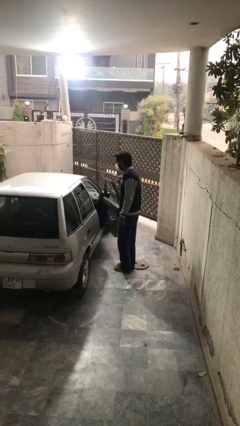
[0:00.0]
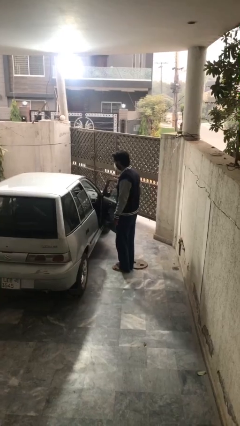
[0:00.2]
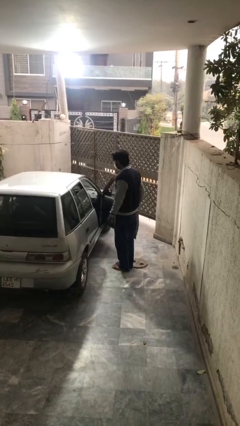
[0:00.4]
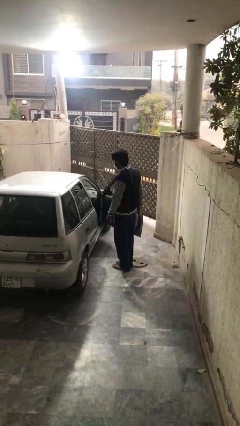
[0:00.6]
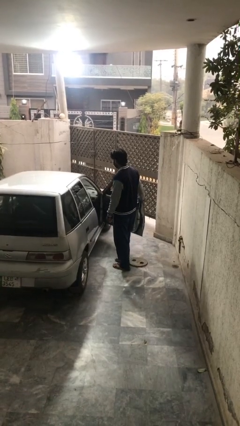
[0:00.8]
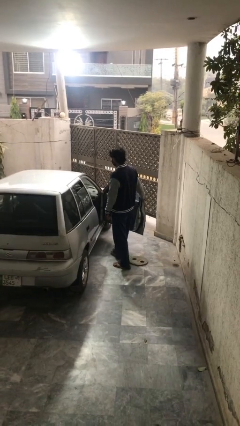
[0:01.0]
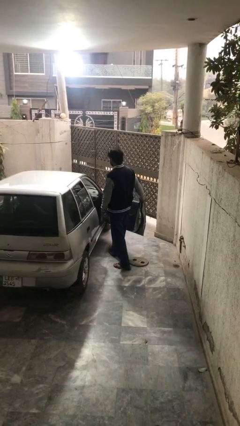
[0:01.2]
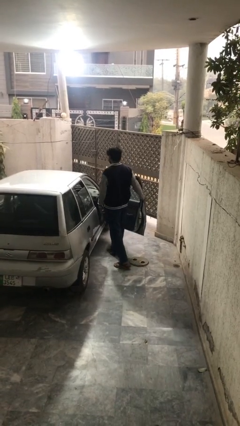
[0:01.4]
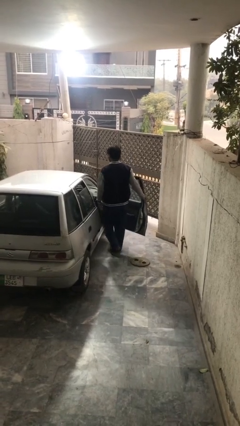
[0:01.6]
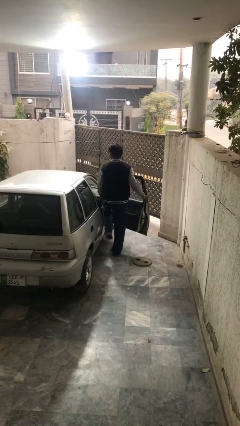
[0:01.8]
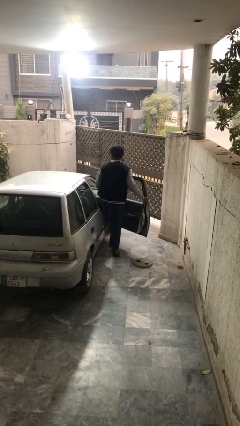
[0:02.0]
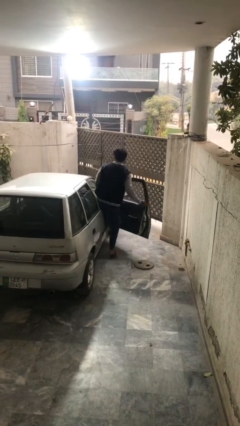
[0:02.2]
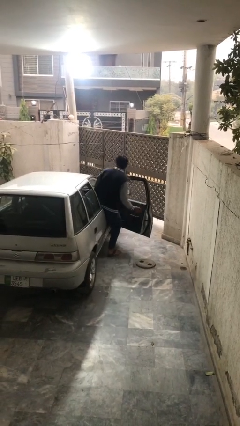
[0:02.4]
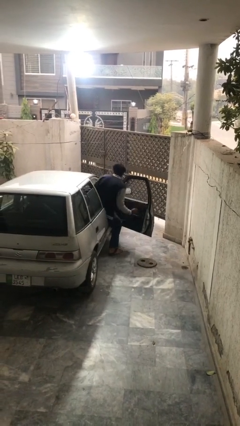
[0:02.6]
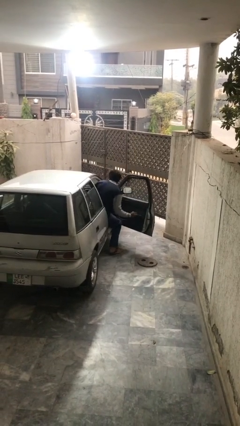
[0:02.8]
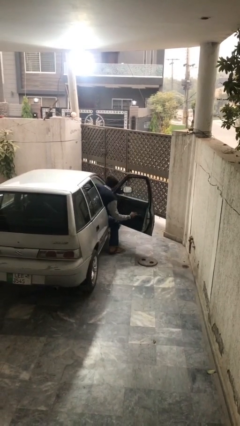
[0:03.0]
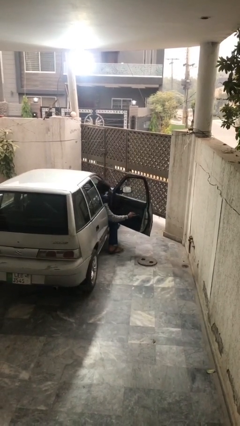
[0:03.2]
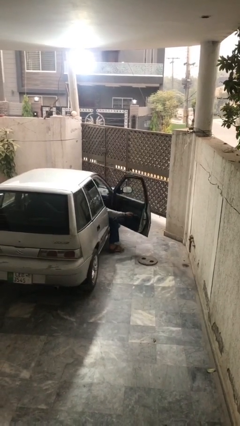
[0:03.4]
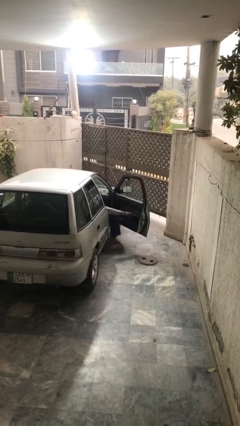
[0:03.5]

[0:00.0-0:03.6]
person enters car

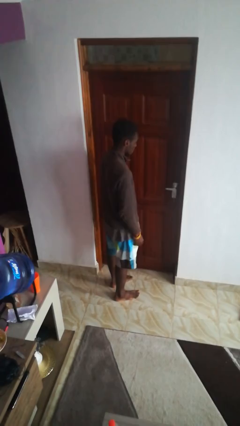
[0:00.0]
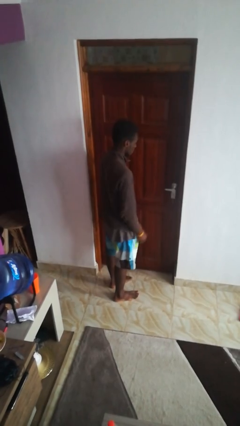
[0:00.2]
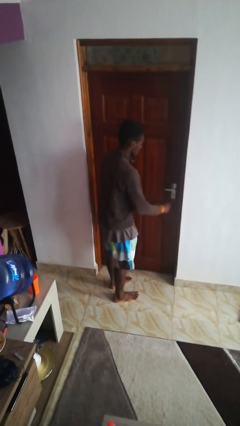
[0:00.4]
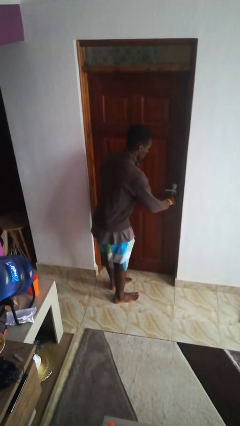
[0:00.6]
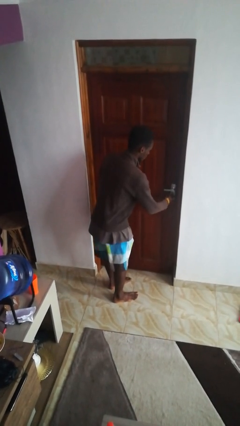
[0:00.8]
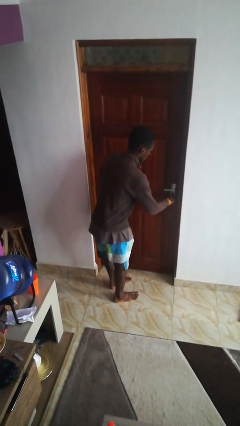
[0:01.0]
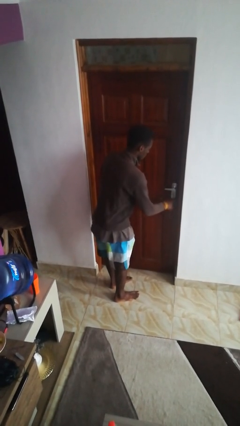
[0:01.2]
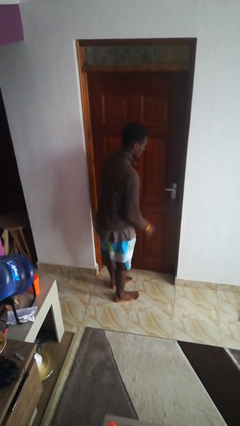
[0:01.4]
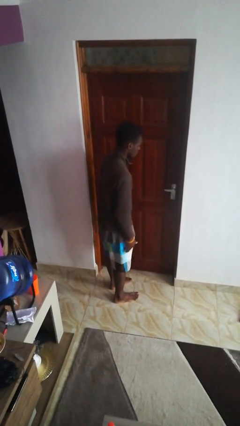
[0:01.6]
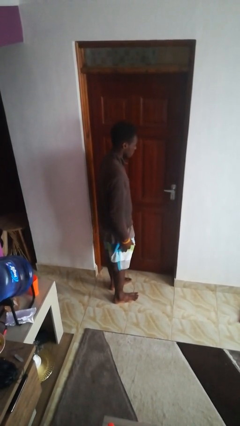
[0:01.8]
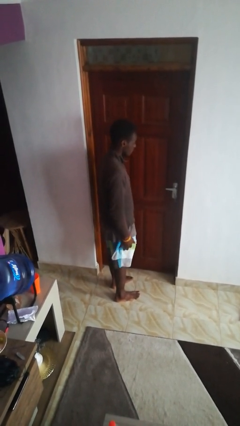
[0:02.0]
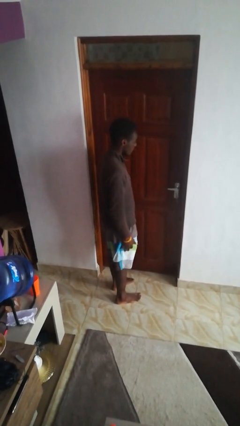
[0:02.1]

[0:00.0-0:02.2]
person locks door with keys

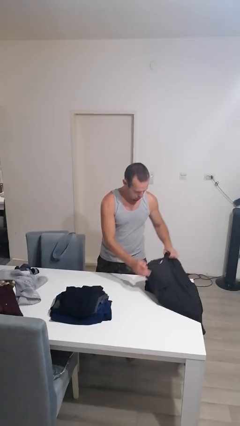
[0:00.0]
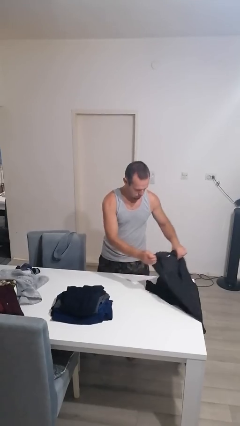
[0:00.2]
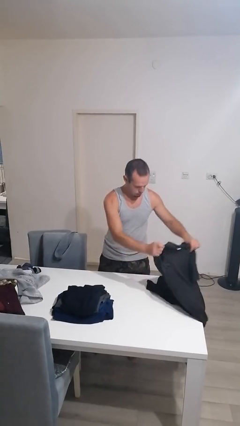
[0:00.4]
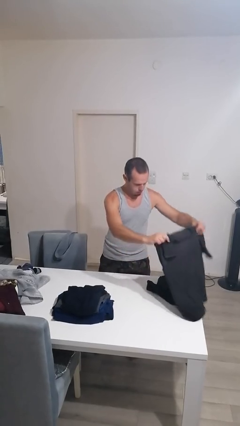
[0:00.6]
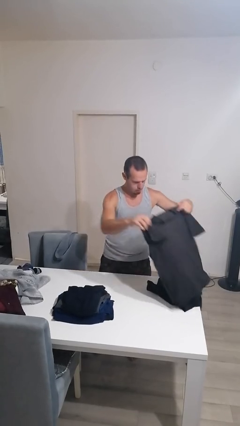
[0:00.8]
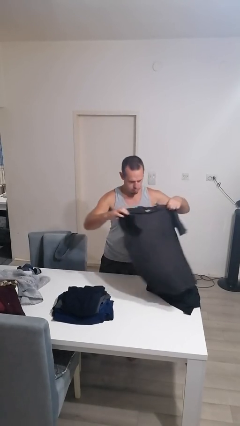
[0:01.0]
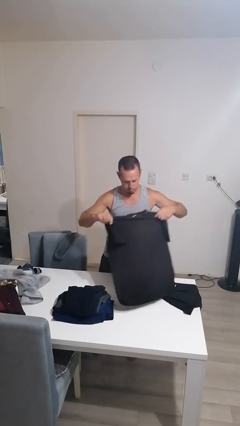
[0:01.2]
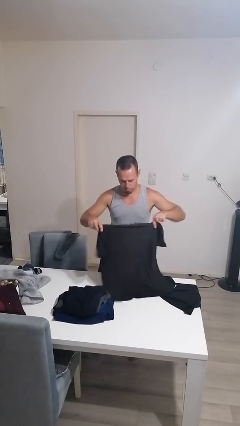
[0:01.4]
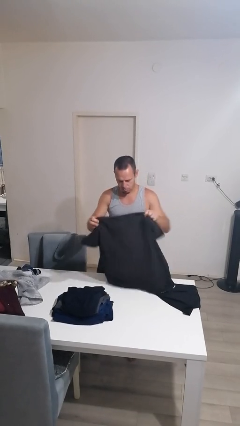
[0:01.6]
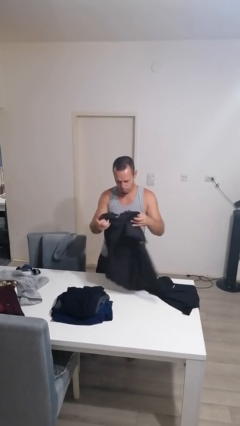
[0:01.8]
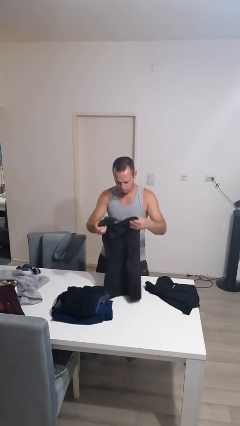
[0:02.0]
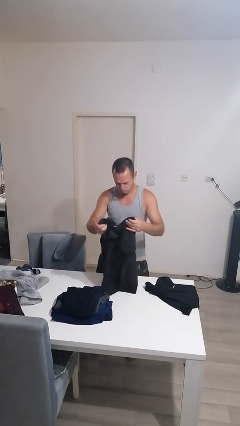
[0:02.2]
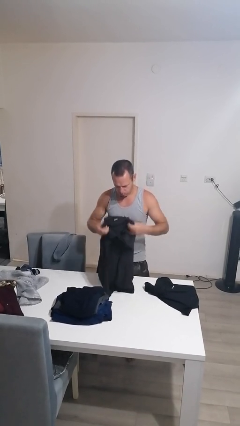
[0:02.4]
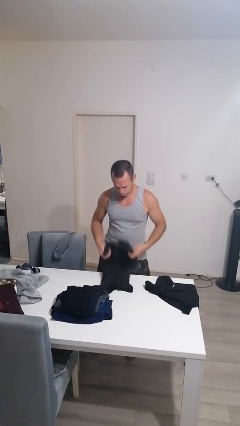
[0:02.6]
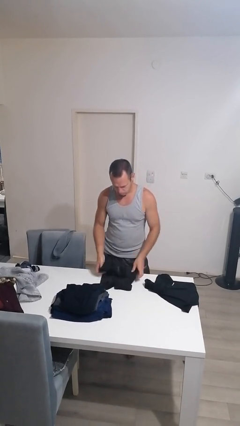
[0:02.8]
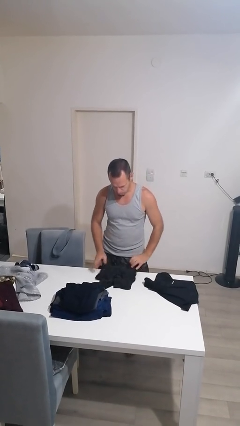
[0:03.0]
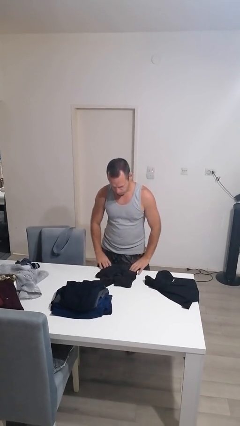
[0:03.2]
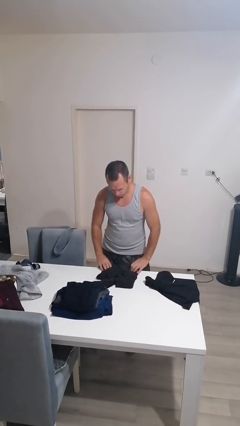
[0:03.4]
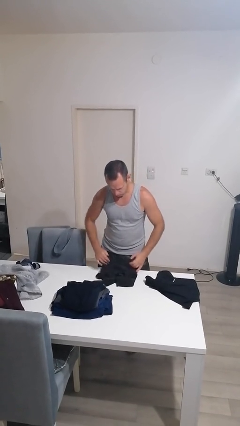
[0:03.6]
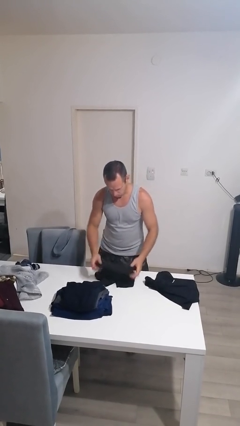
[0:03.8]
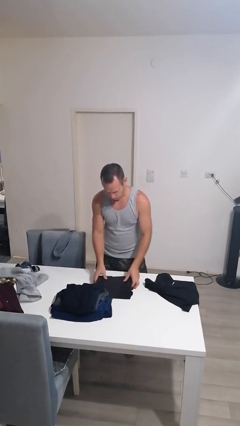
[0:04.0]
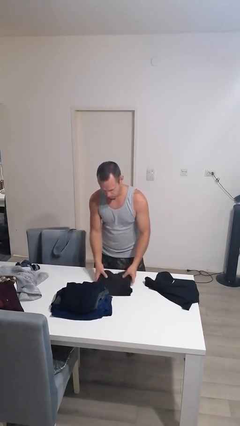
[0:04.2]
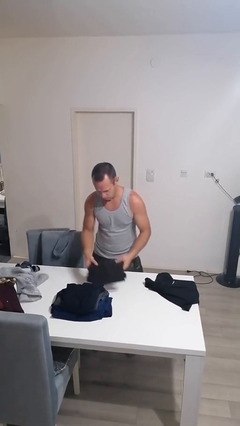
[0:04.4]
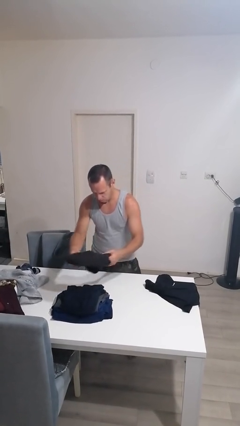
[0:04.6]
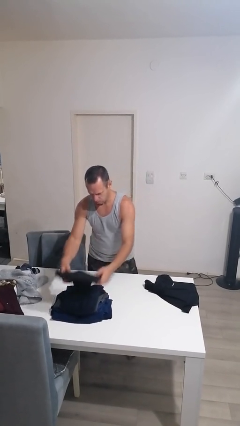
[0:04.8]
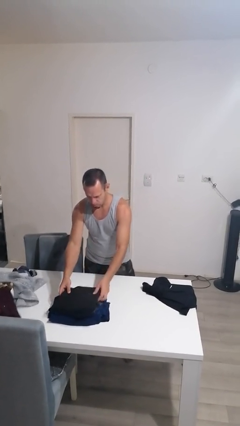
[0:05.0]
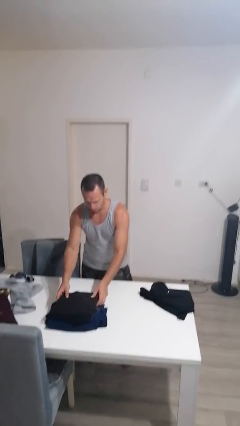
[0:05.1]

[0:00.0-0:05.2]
person folds shirt

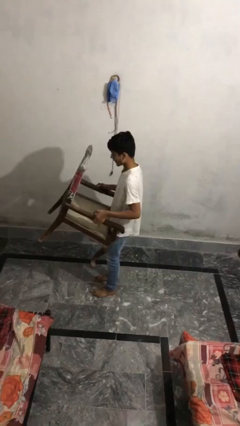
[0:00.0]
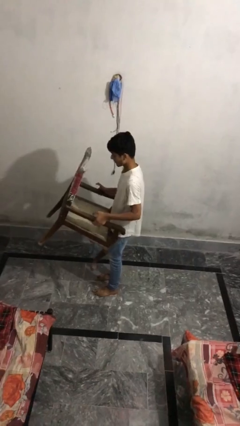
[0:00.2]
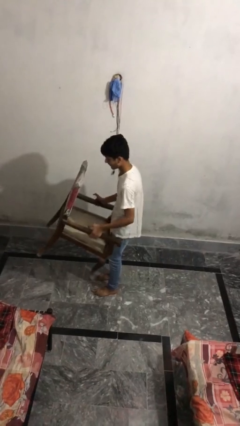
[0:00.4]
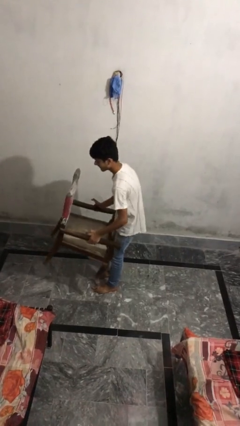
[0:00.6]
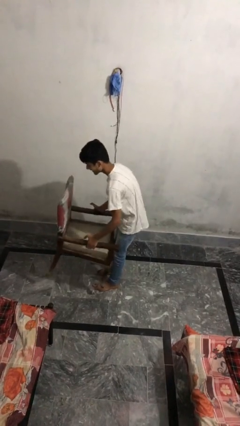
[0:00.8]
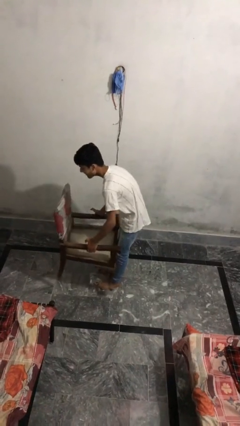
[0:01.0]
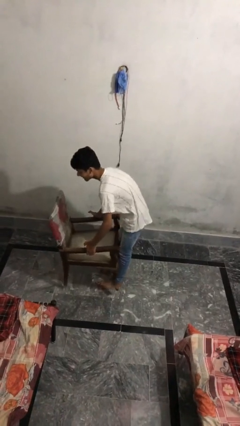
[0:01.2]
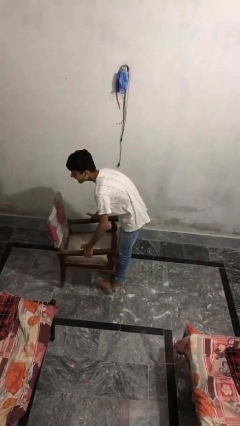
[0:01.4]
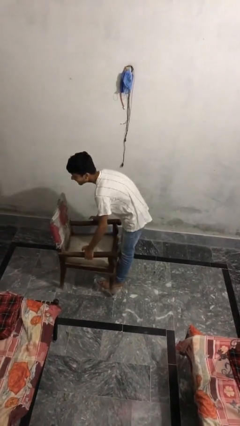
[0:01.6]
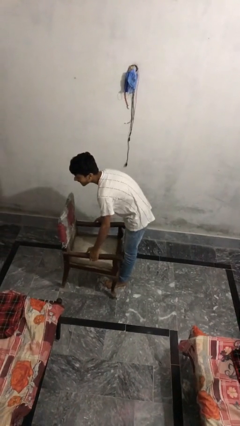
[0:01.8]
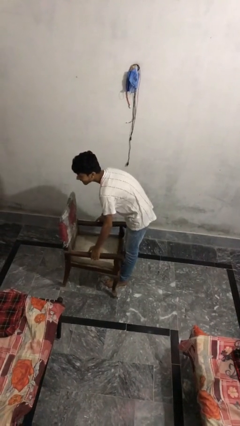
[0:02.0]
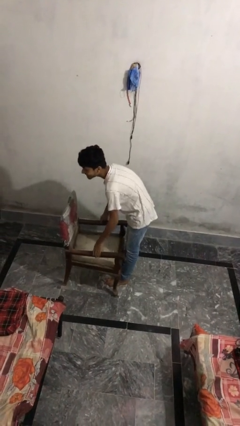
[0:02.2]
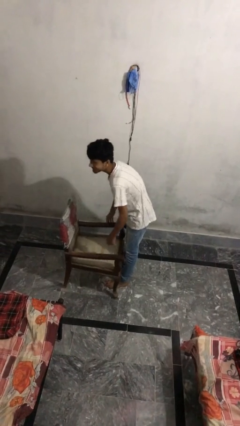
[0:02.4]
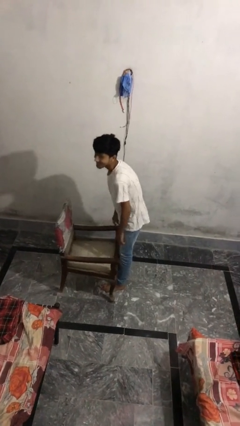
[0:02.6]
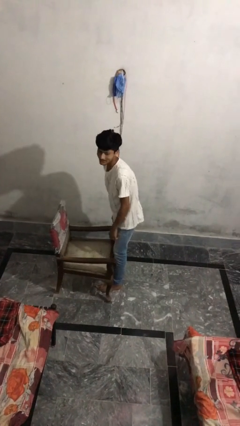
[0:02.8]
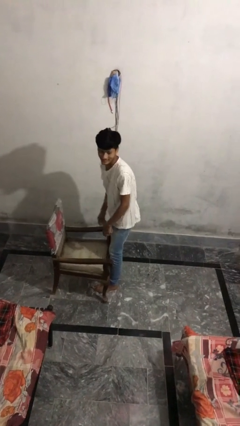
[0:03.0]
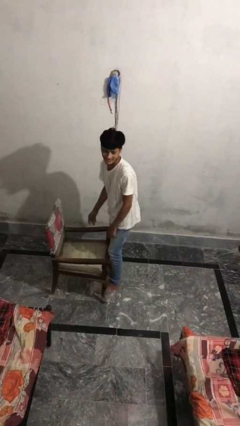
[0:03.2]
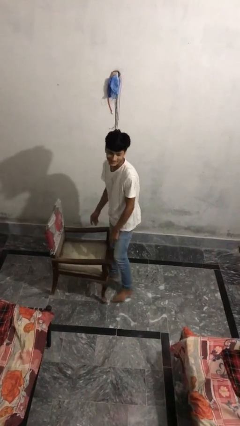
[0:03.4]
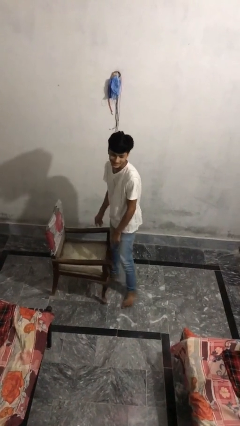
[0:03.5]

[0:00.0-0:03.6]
person puts down object on floor

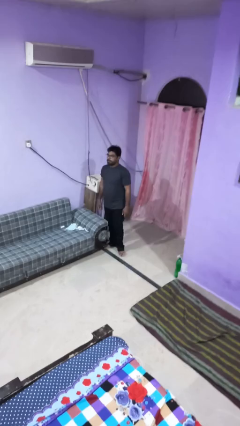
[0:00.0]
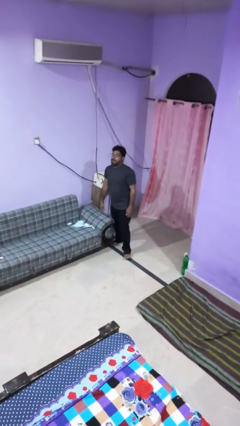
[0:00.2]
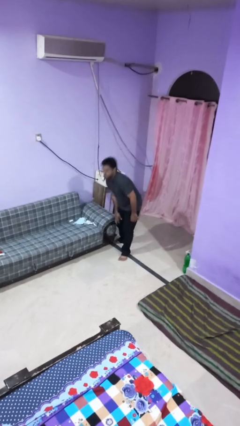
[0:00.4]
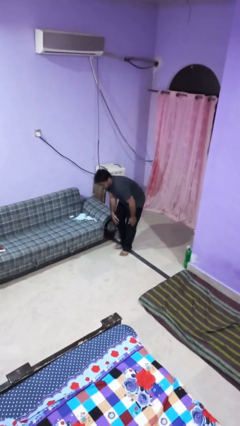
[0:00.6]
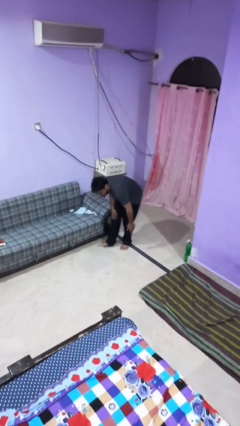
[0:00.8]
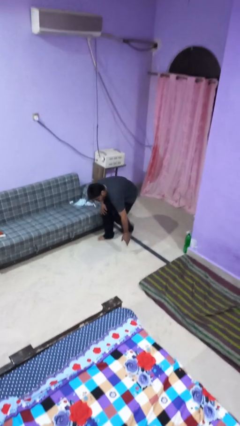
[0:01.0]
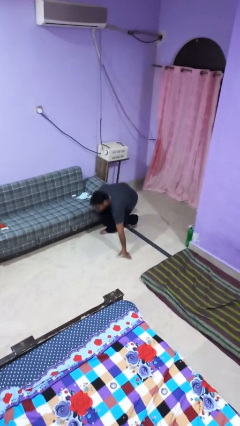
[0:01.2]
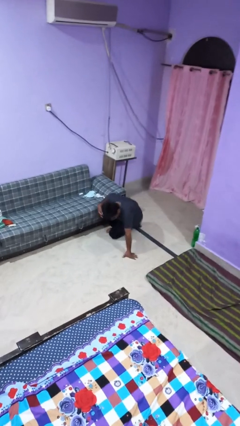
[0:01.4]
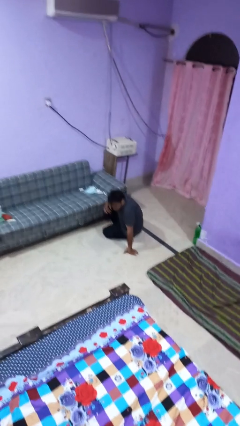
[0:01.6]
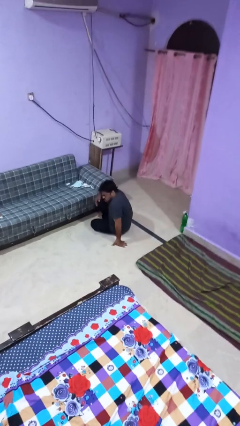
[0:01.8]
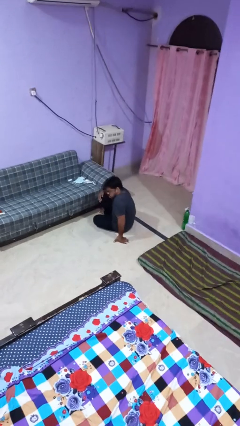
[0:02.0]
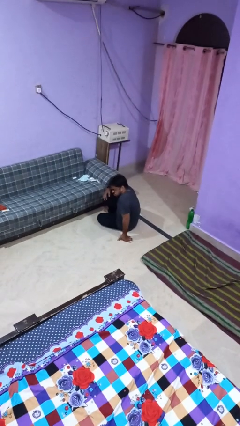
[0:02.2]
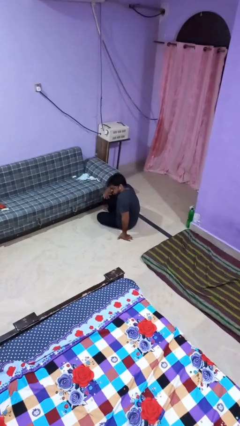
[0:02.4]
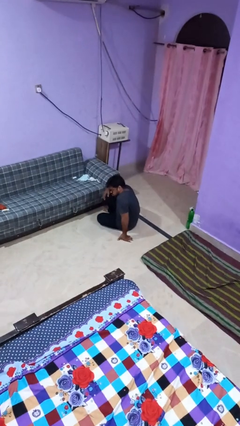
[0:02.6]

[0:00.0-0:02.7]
person trips on object on floor
